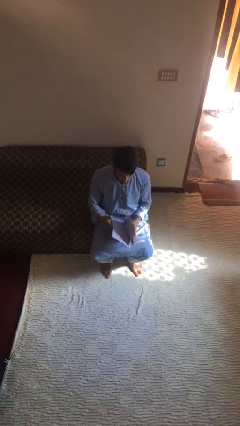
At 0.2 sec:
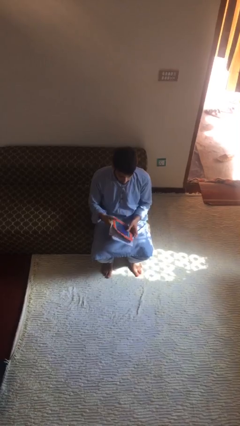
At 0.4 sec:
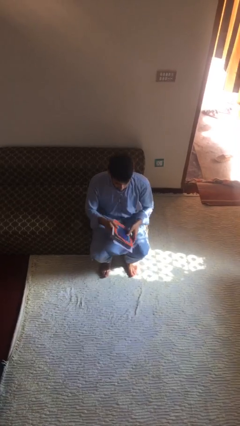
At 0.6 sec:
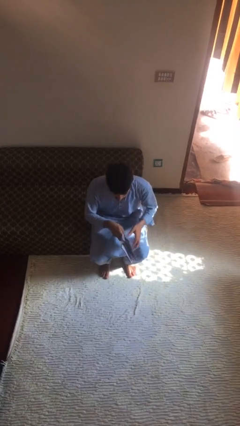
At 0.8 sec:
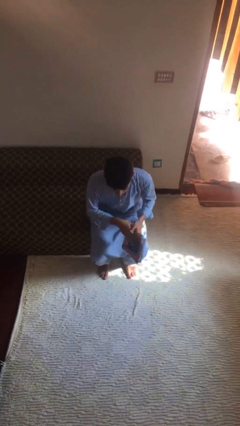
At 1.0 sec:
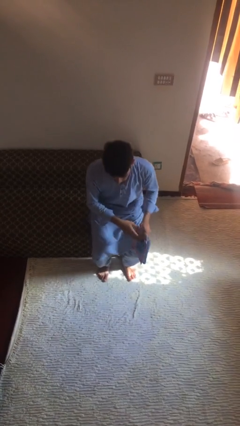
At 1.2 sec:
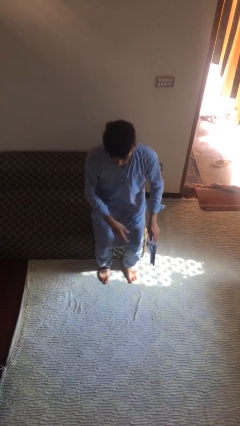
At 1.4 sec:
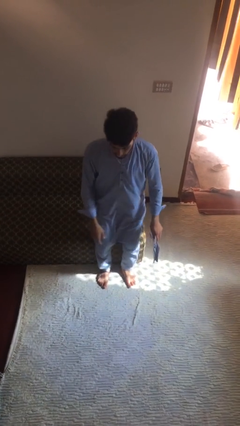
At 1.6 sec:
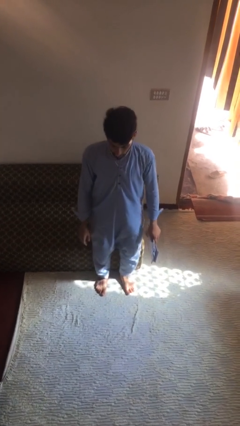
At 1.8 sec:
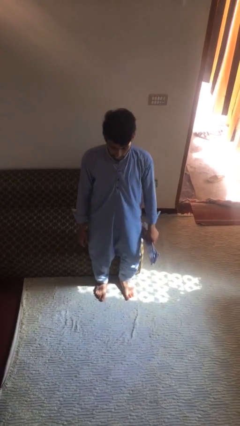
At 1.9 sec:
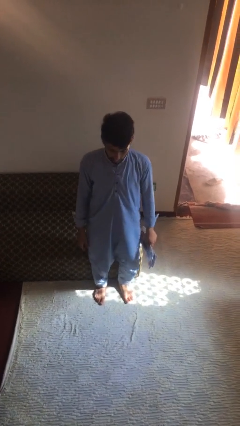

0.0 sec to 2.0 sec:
person stands up

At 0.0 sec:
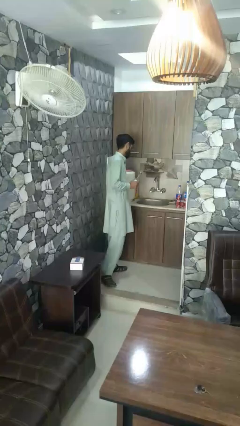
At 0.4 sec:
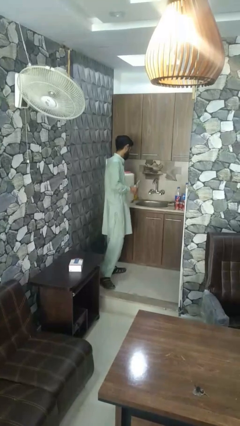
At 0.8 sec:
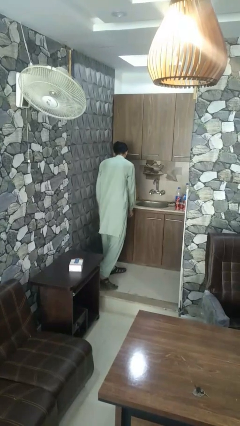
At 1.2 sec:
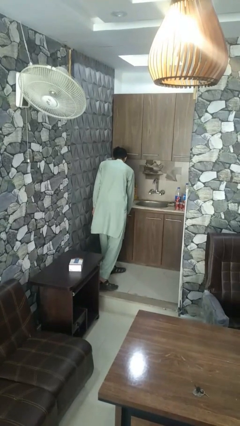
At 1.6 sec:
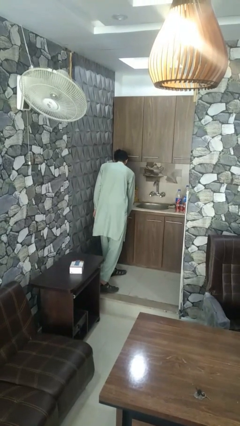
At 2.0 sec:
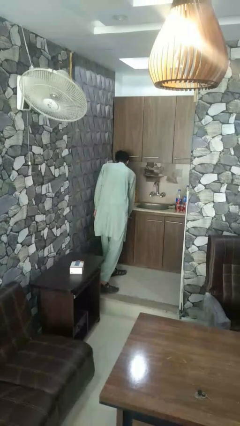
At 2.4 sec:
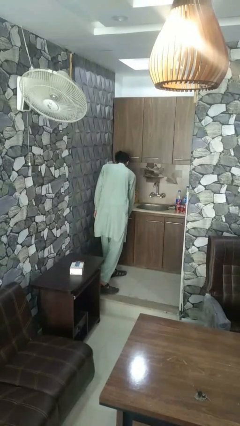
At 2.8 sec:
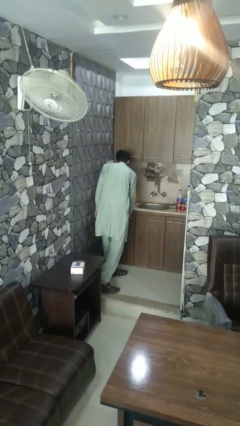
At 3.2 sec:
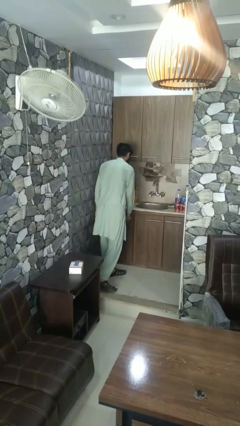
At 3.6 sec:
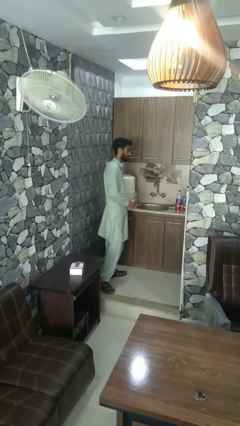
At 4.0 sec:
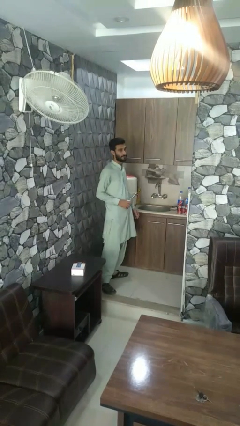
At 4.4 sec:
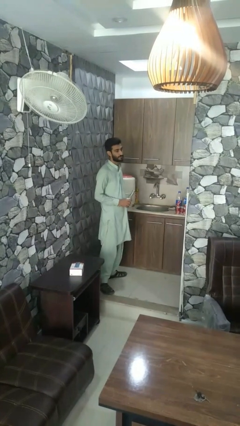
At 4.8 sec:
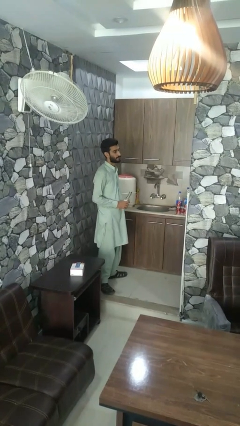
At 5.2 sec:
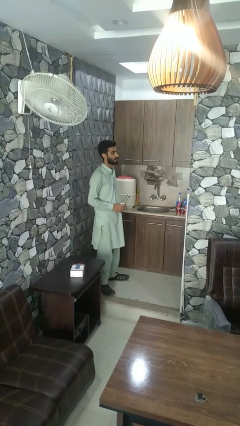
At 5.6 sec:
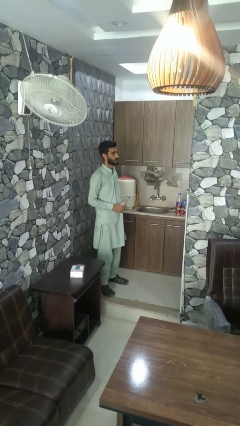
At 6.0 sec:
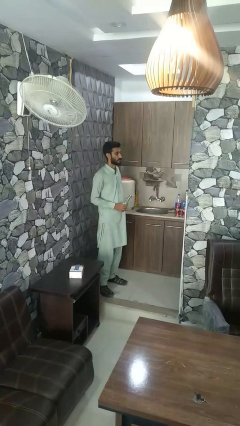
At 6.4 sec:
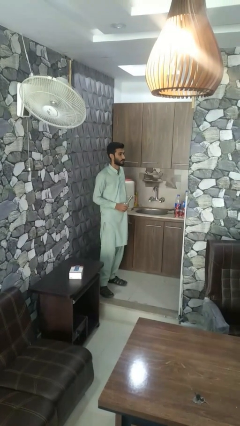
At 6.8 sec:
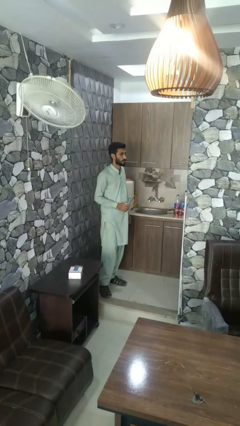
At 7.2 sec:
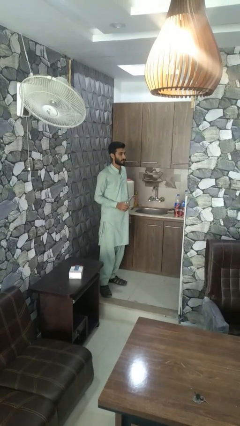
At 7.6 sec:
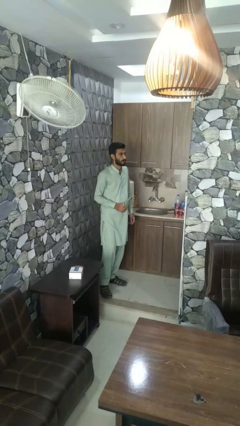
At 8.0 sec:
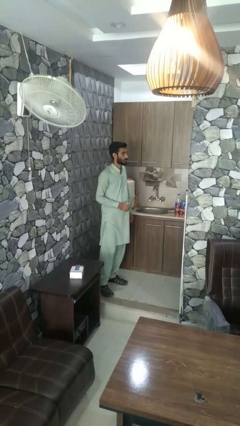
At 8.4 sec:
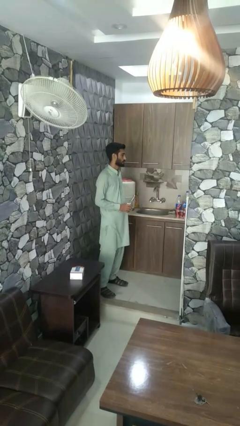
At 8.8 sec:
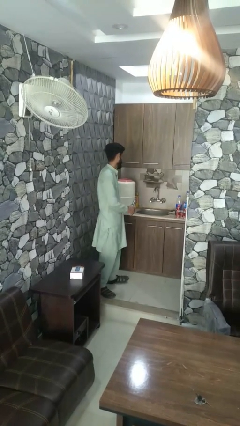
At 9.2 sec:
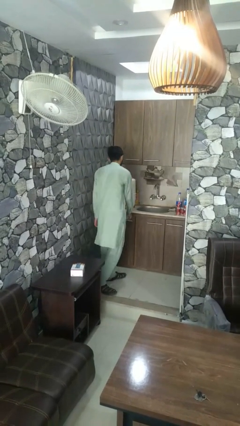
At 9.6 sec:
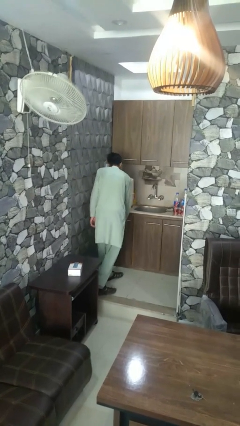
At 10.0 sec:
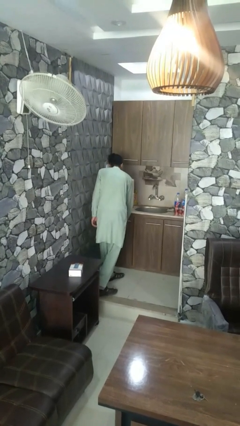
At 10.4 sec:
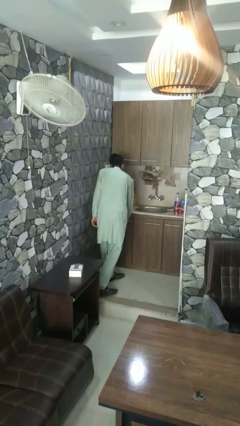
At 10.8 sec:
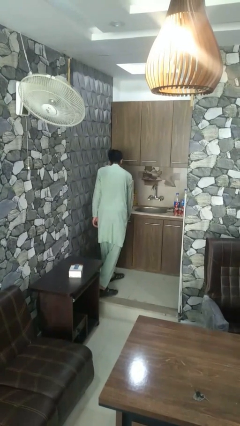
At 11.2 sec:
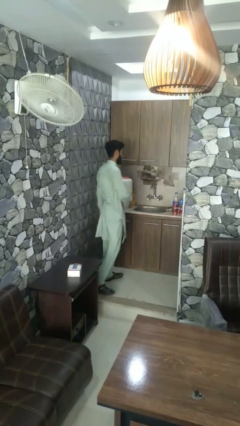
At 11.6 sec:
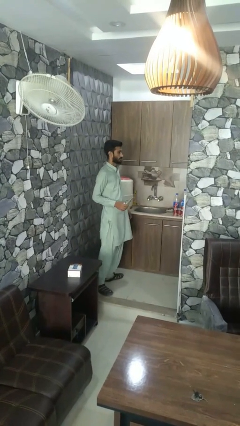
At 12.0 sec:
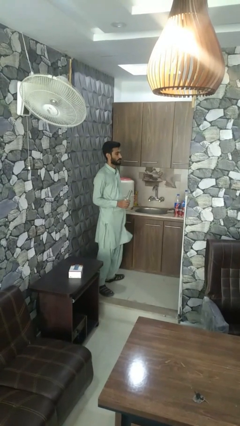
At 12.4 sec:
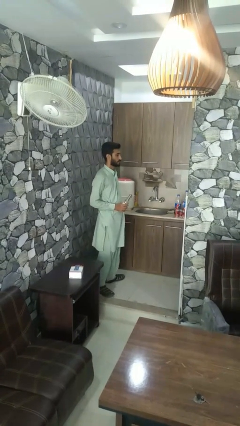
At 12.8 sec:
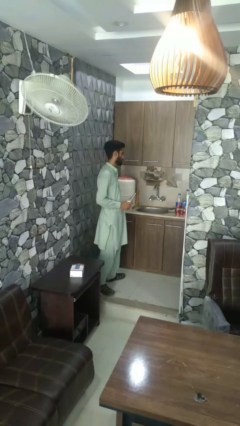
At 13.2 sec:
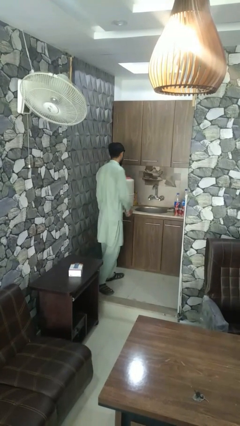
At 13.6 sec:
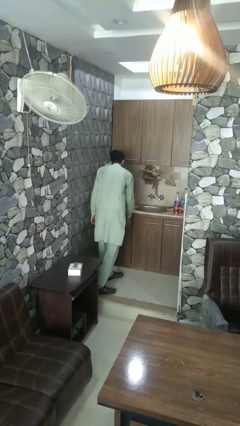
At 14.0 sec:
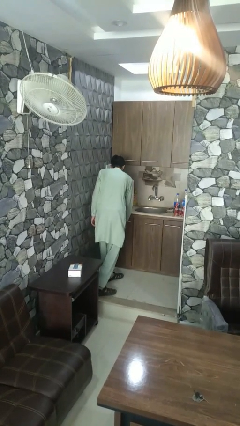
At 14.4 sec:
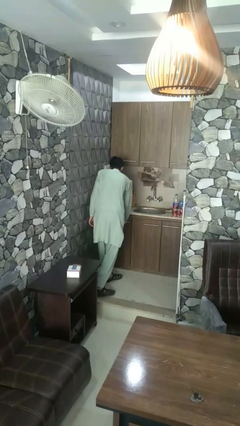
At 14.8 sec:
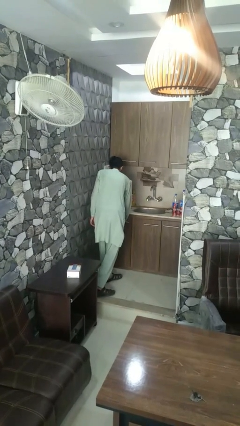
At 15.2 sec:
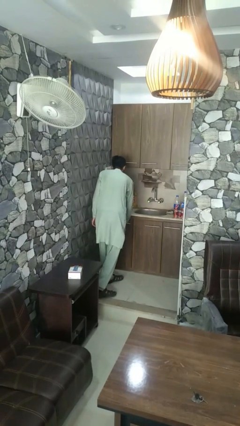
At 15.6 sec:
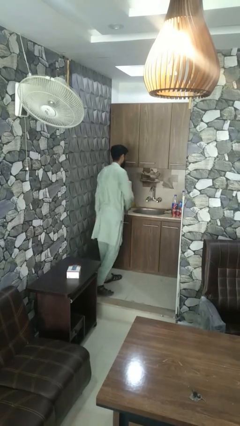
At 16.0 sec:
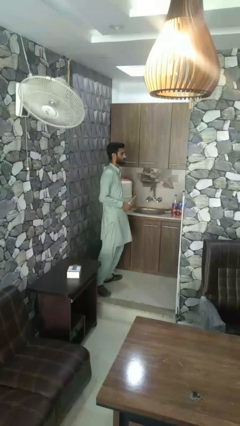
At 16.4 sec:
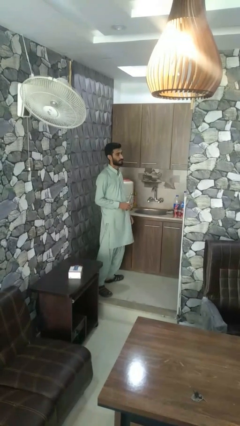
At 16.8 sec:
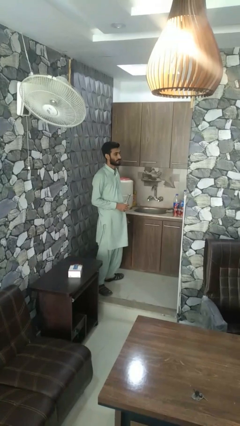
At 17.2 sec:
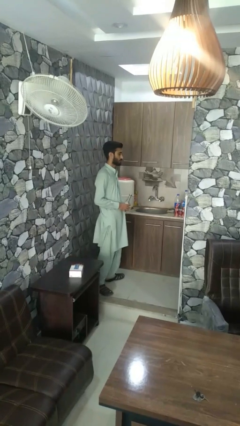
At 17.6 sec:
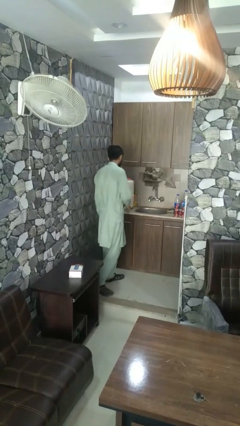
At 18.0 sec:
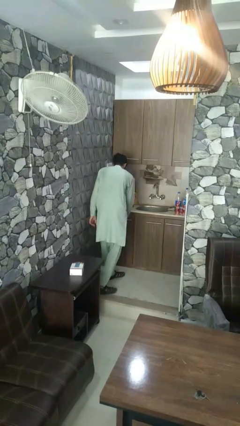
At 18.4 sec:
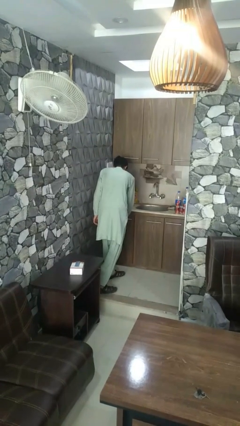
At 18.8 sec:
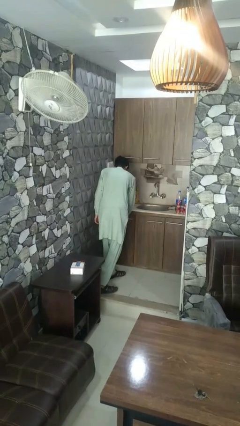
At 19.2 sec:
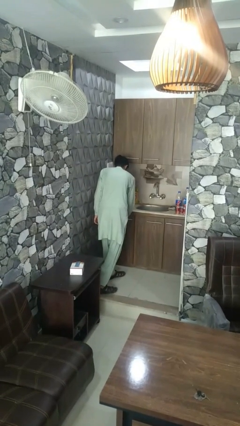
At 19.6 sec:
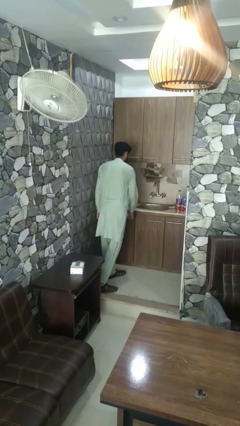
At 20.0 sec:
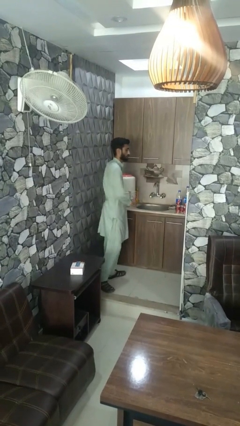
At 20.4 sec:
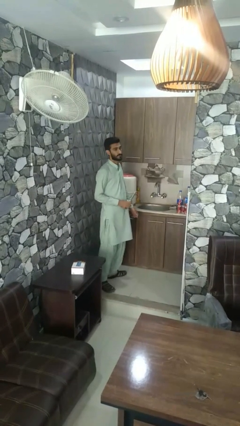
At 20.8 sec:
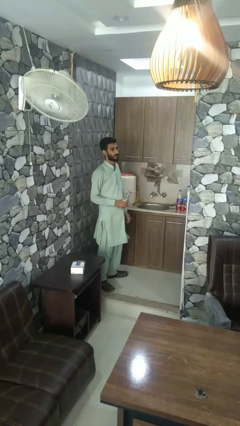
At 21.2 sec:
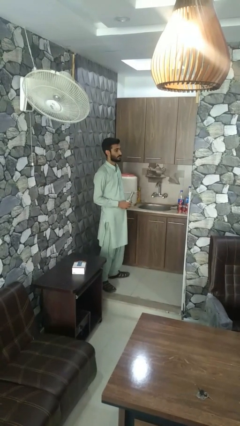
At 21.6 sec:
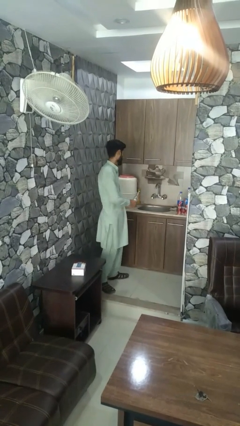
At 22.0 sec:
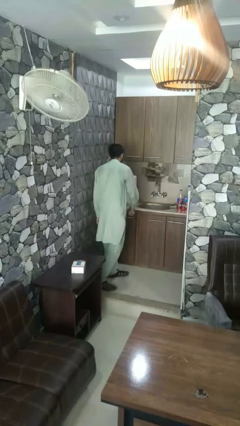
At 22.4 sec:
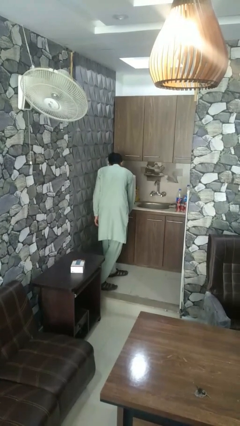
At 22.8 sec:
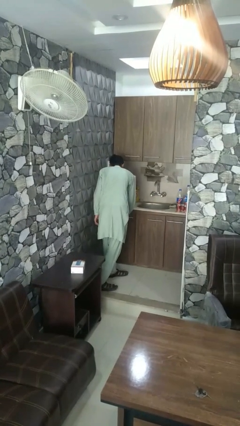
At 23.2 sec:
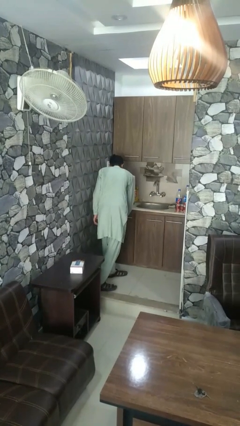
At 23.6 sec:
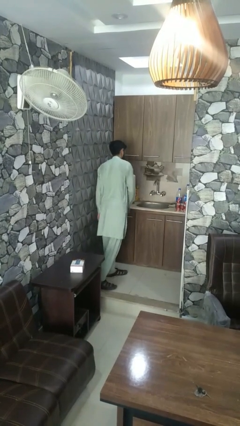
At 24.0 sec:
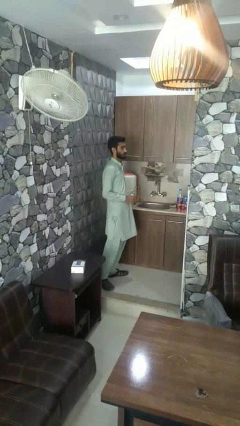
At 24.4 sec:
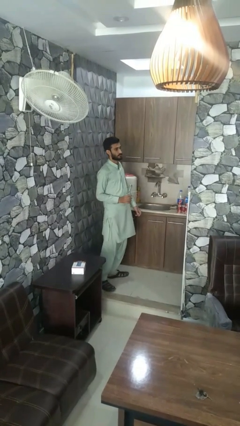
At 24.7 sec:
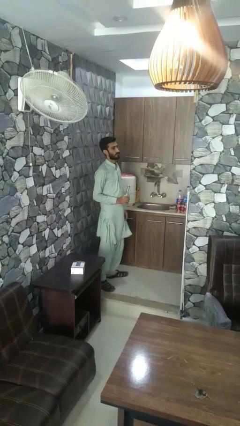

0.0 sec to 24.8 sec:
person opens can with can opener

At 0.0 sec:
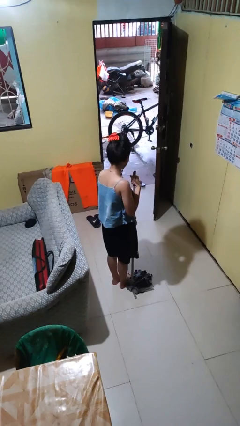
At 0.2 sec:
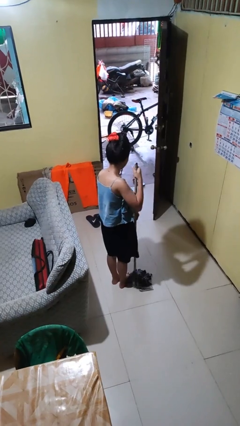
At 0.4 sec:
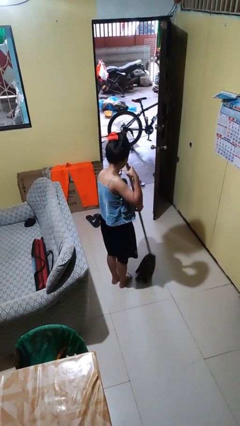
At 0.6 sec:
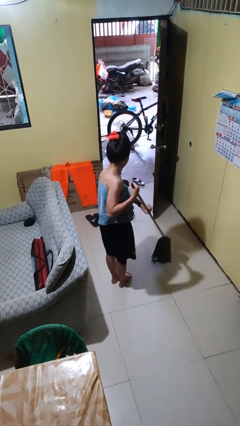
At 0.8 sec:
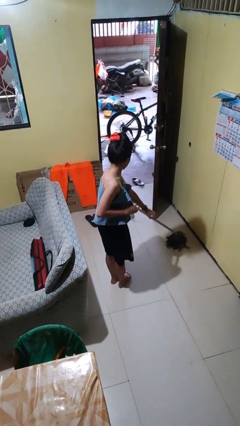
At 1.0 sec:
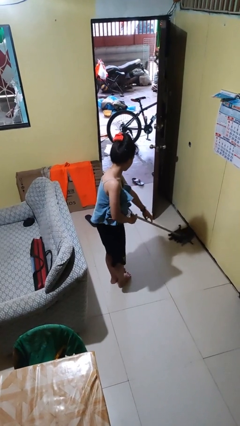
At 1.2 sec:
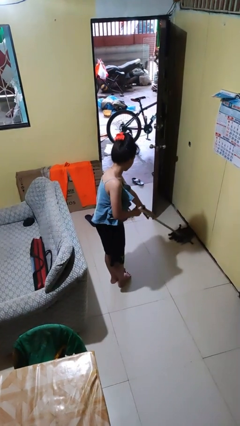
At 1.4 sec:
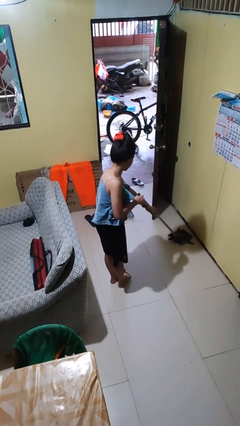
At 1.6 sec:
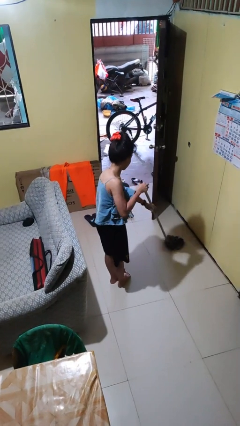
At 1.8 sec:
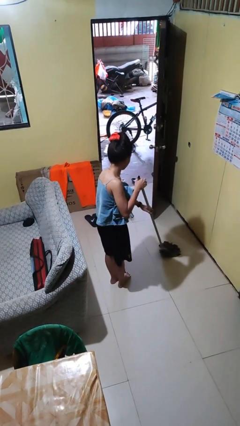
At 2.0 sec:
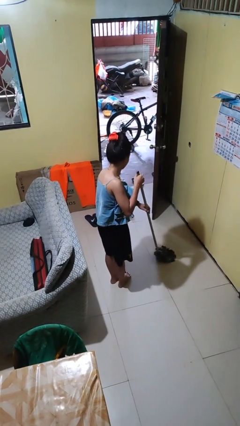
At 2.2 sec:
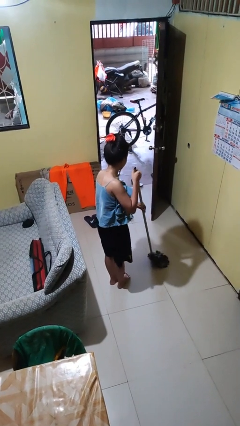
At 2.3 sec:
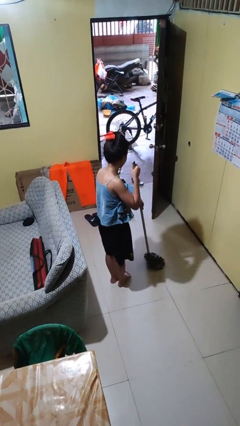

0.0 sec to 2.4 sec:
person mops

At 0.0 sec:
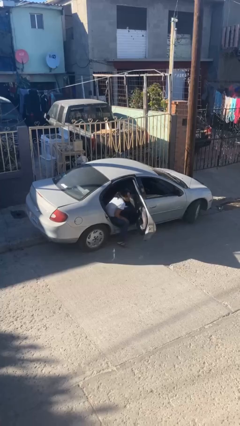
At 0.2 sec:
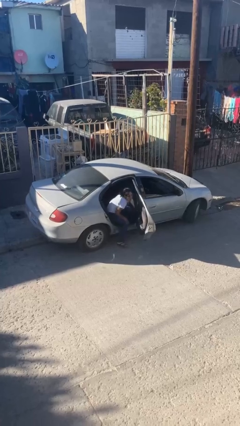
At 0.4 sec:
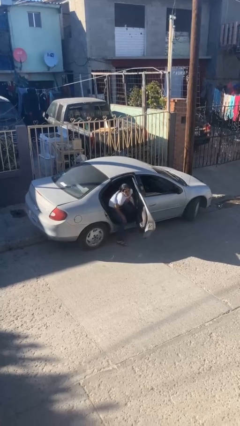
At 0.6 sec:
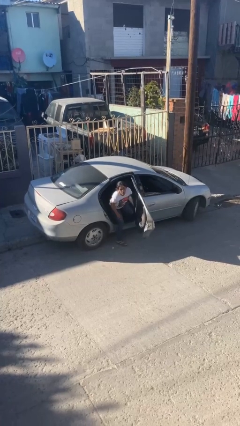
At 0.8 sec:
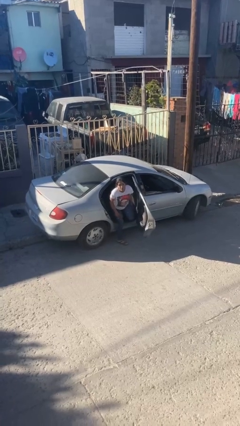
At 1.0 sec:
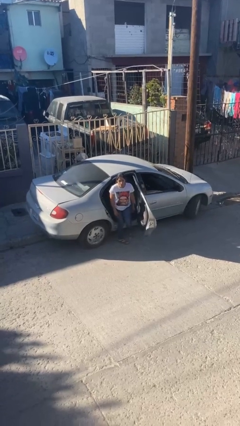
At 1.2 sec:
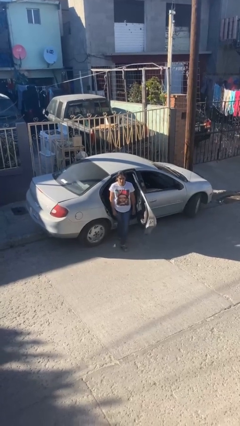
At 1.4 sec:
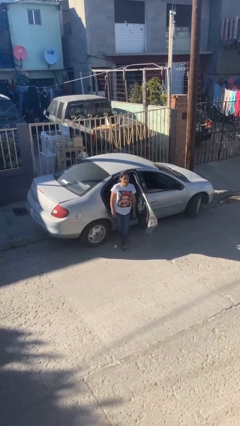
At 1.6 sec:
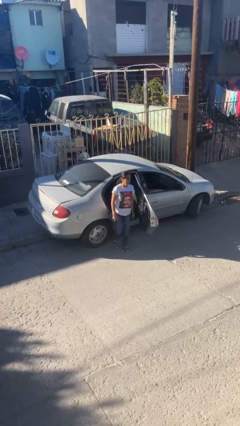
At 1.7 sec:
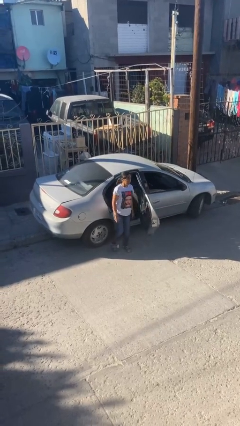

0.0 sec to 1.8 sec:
person exits car
